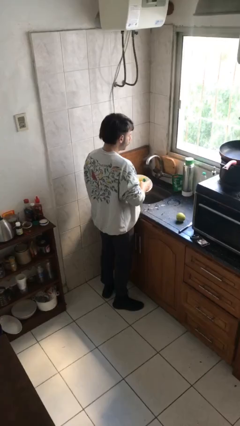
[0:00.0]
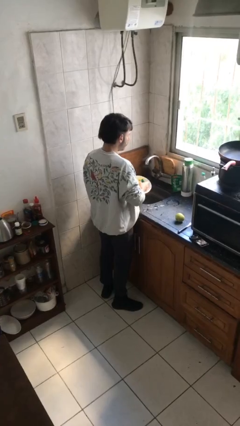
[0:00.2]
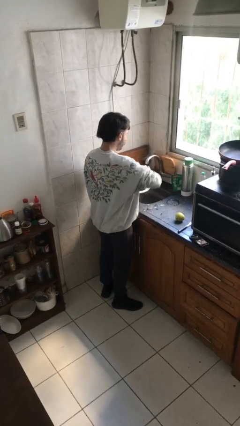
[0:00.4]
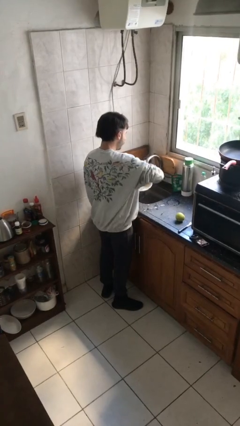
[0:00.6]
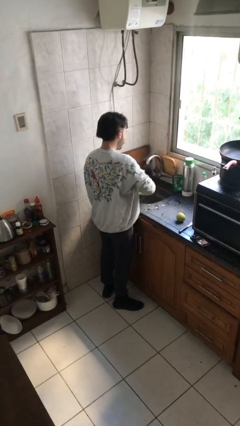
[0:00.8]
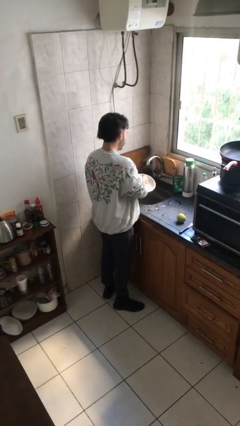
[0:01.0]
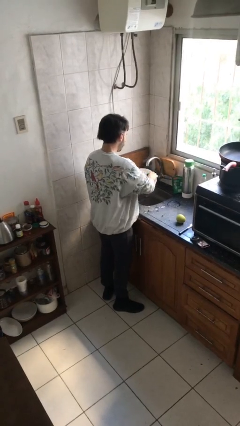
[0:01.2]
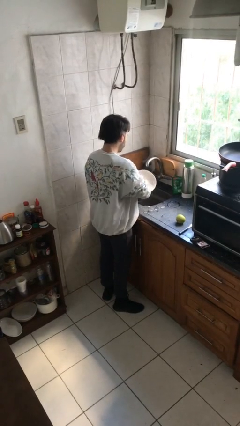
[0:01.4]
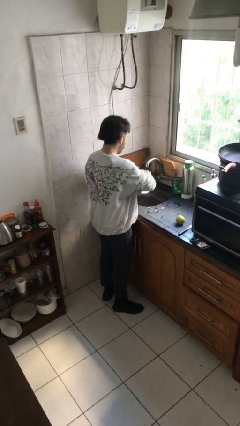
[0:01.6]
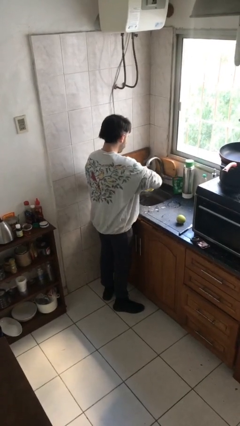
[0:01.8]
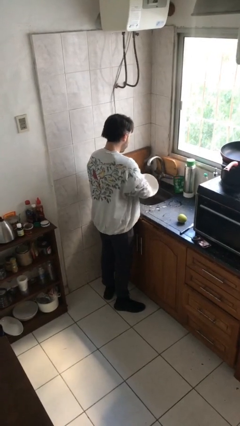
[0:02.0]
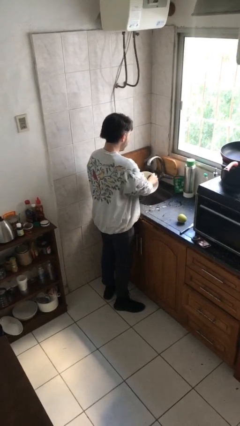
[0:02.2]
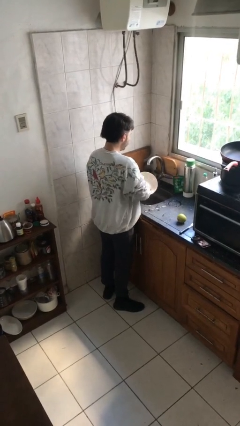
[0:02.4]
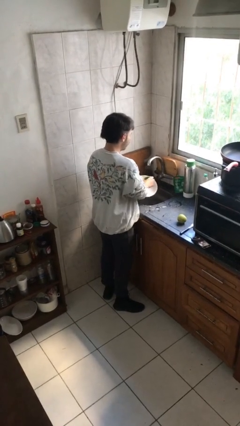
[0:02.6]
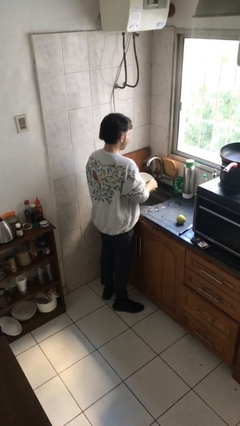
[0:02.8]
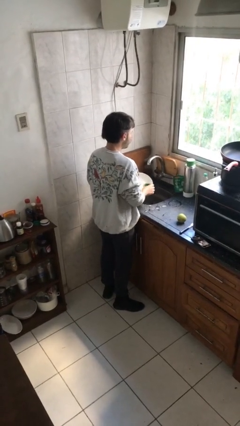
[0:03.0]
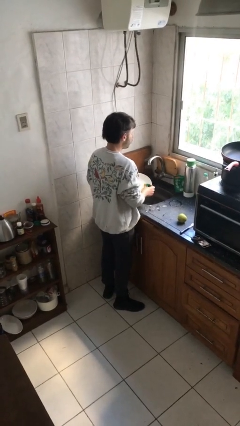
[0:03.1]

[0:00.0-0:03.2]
person washes dish

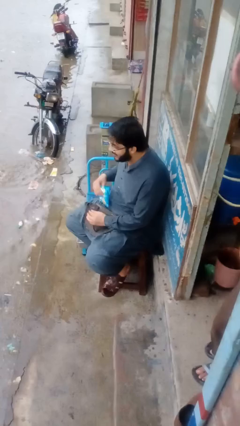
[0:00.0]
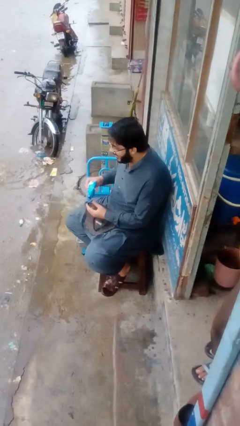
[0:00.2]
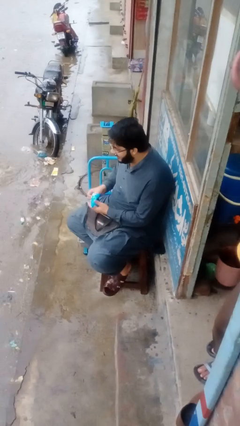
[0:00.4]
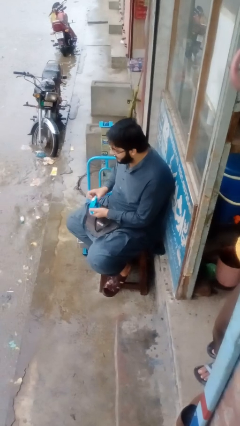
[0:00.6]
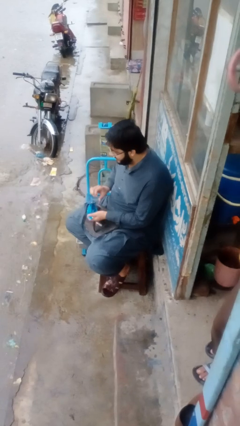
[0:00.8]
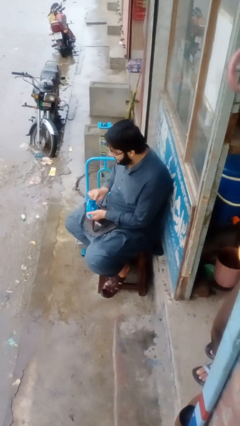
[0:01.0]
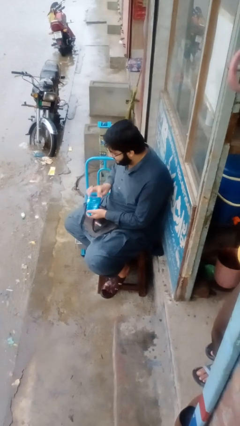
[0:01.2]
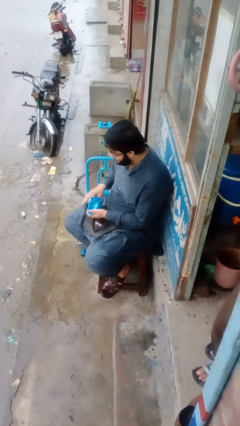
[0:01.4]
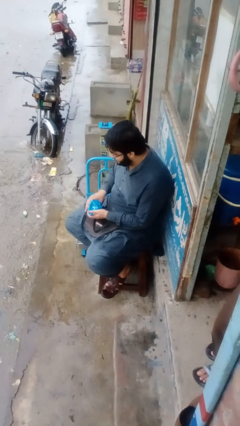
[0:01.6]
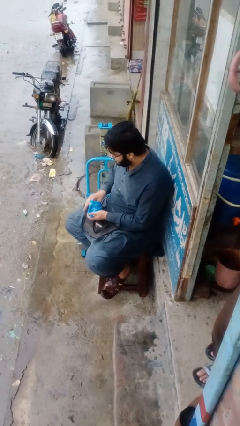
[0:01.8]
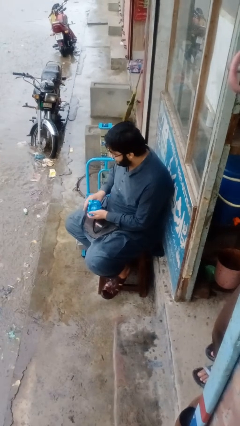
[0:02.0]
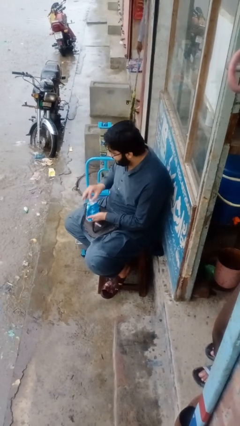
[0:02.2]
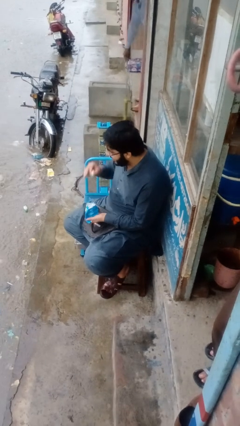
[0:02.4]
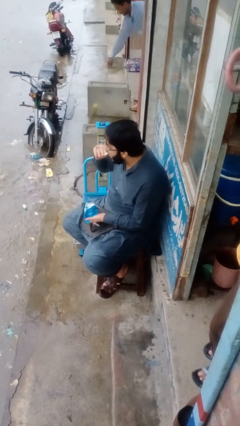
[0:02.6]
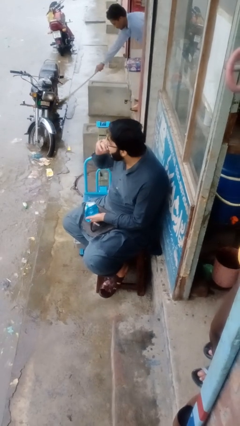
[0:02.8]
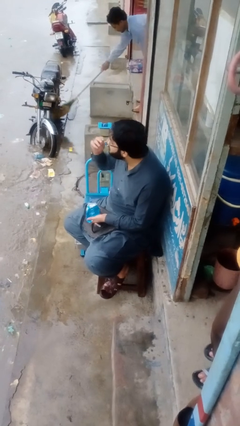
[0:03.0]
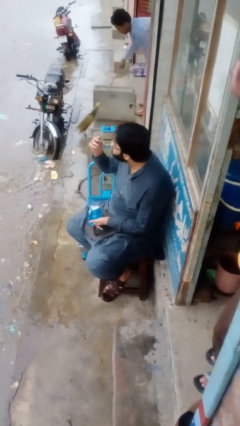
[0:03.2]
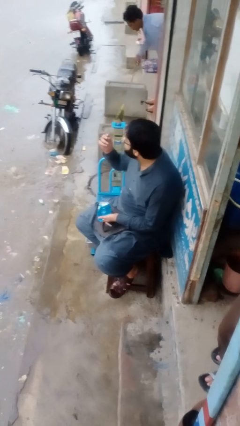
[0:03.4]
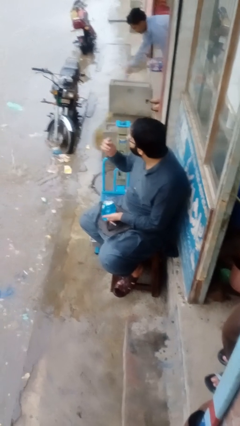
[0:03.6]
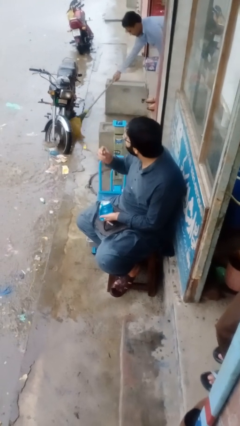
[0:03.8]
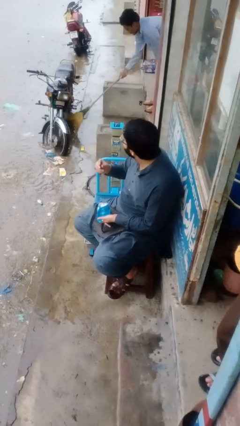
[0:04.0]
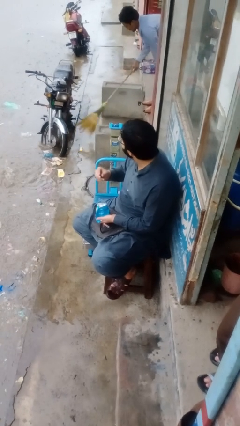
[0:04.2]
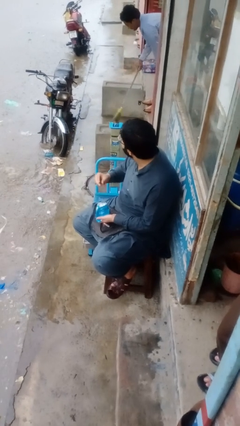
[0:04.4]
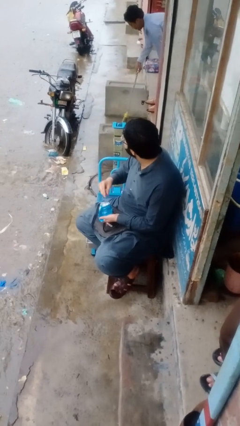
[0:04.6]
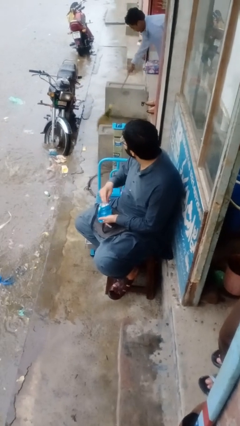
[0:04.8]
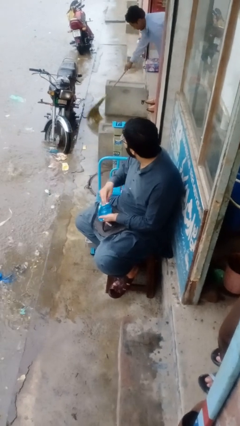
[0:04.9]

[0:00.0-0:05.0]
person eats snack from bag

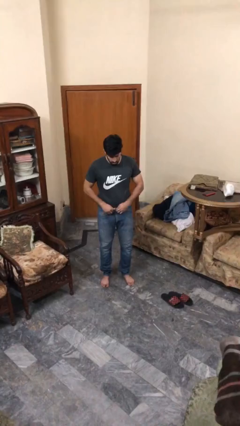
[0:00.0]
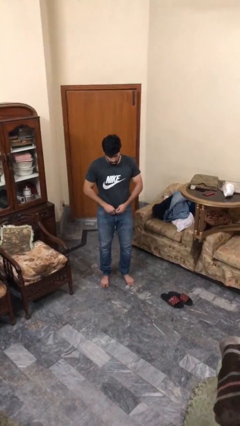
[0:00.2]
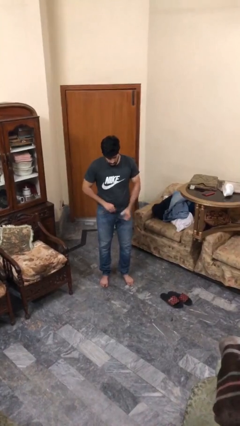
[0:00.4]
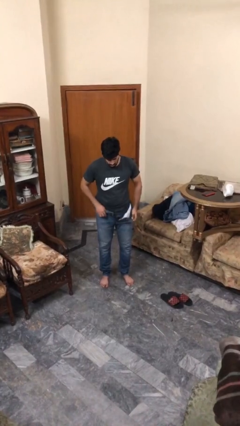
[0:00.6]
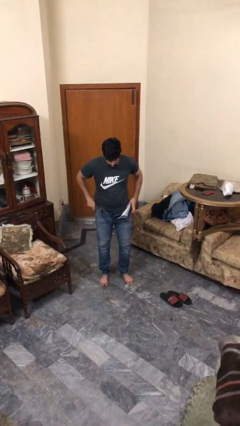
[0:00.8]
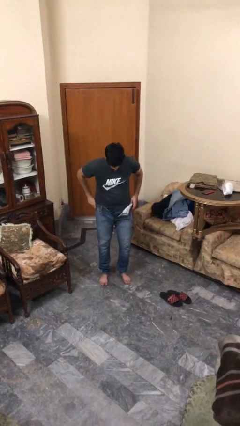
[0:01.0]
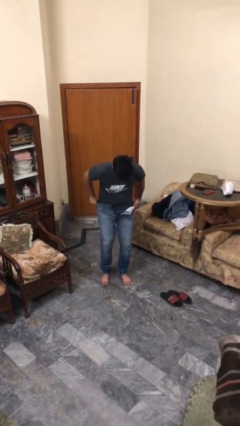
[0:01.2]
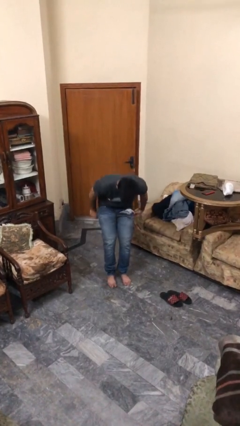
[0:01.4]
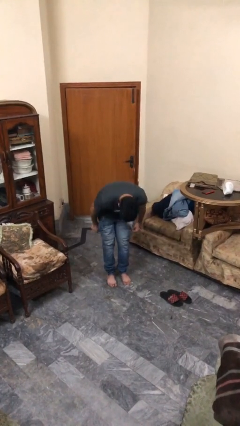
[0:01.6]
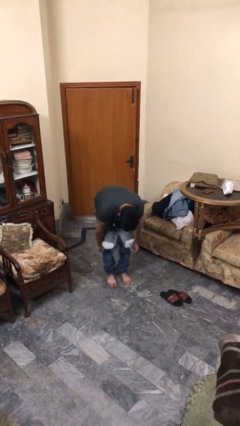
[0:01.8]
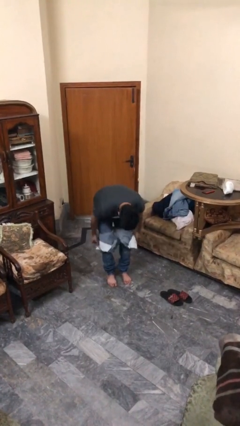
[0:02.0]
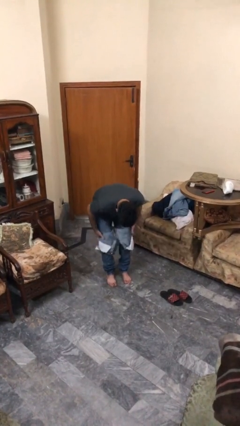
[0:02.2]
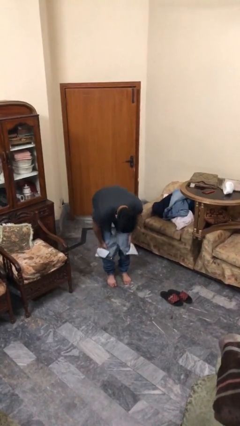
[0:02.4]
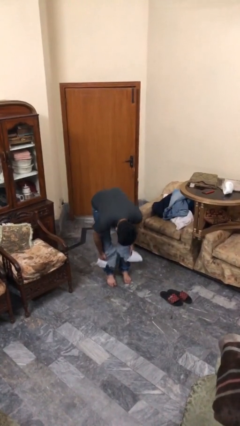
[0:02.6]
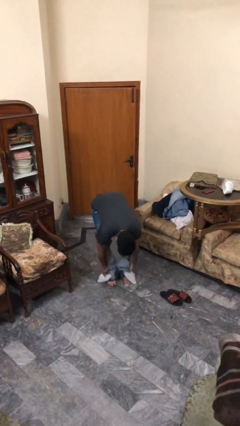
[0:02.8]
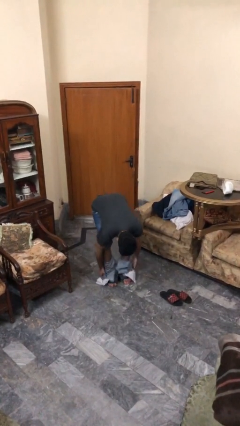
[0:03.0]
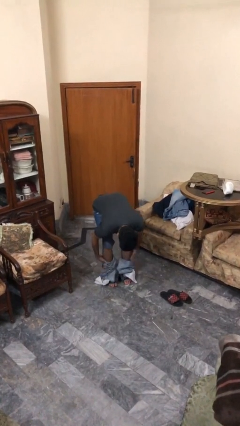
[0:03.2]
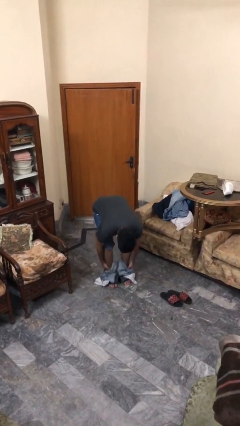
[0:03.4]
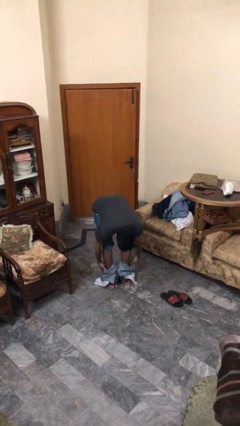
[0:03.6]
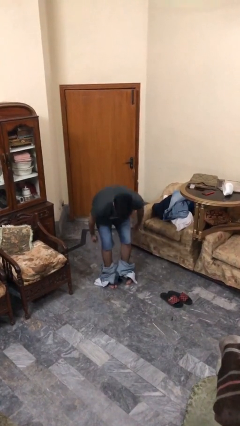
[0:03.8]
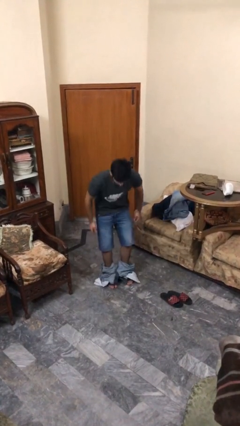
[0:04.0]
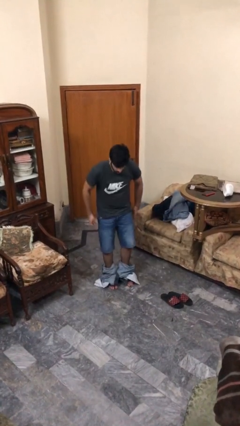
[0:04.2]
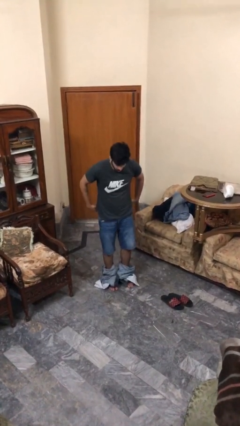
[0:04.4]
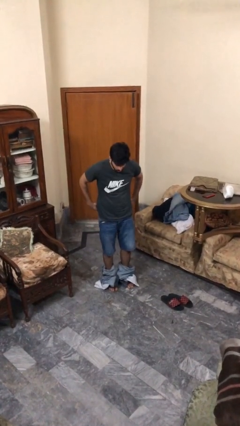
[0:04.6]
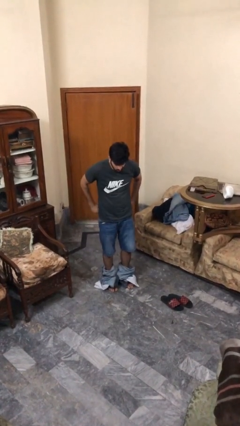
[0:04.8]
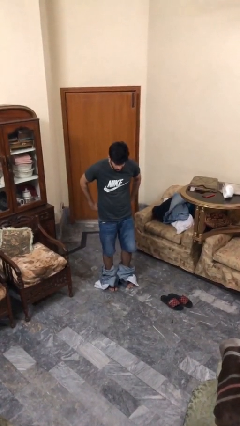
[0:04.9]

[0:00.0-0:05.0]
person takes off pants

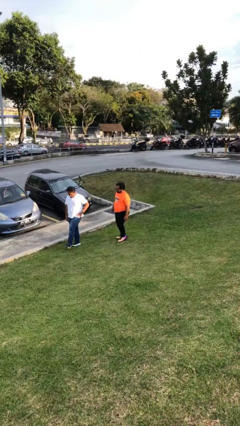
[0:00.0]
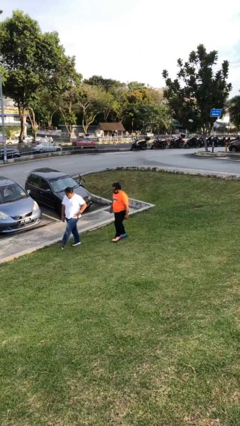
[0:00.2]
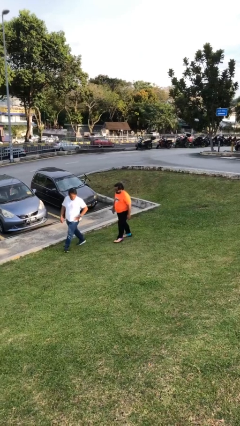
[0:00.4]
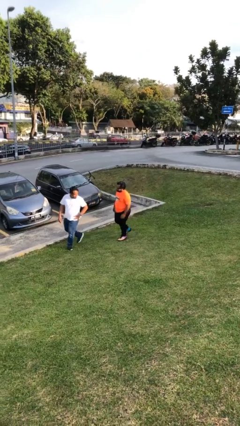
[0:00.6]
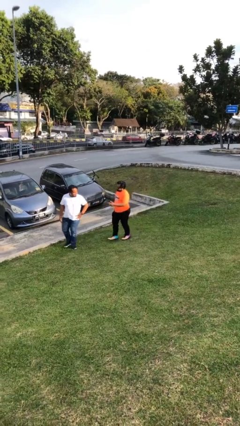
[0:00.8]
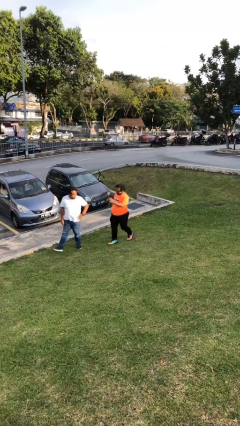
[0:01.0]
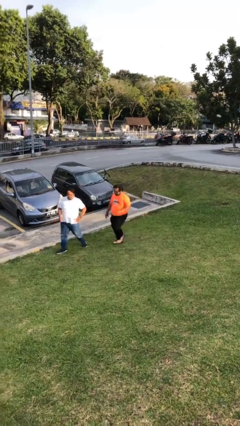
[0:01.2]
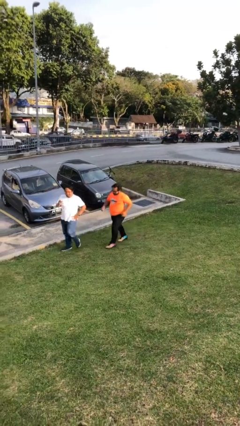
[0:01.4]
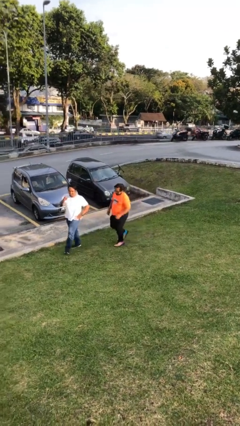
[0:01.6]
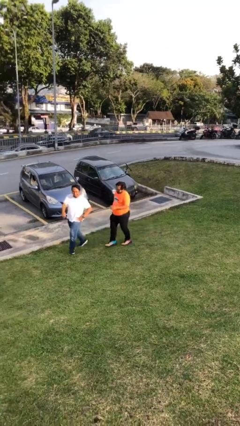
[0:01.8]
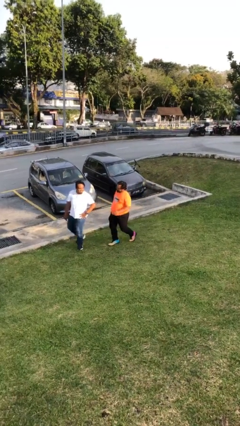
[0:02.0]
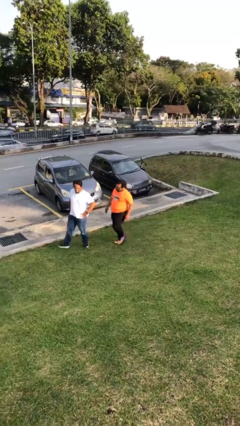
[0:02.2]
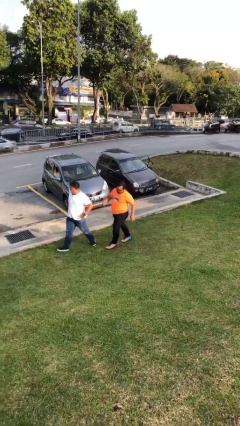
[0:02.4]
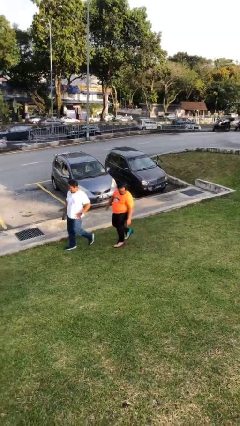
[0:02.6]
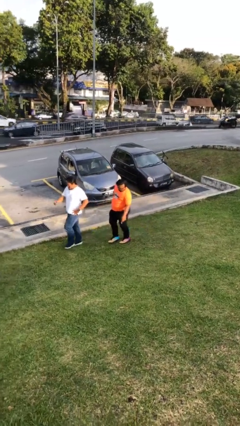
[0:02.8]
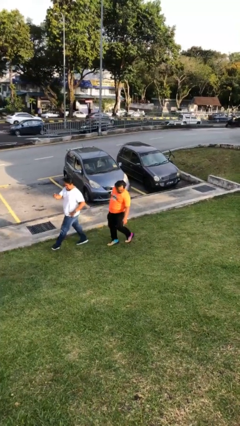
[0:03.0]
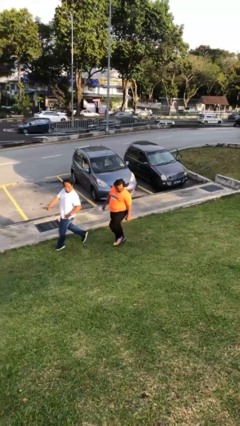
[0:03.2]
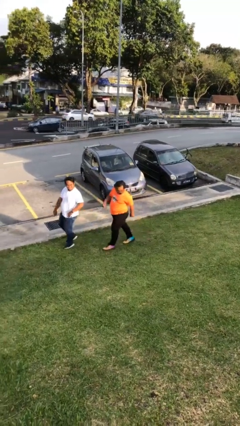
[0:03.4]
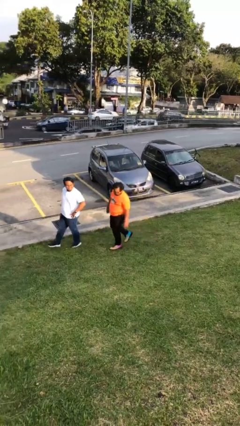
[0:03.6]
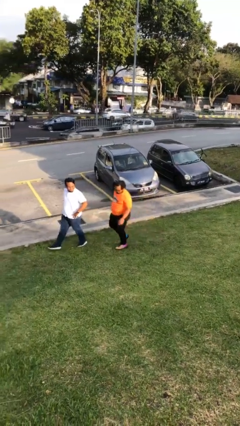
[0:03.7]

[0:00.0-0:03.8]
person talks to person

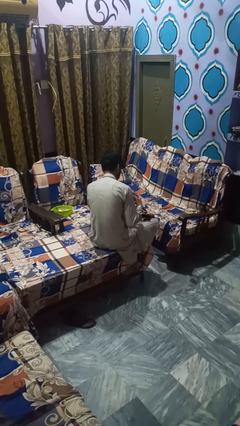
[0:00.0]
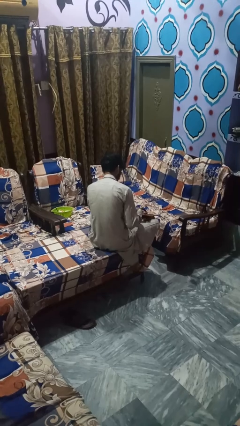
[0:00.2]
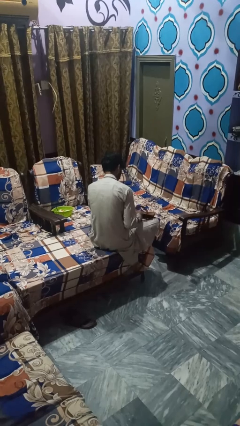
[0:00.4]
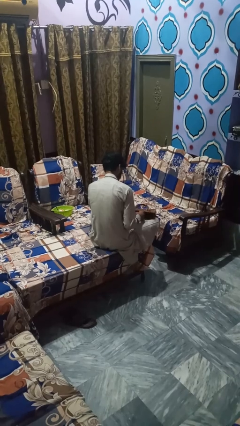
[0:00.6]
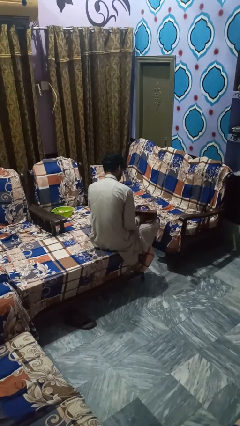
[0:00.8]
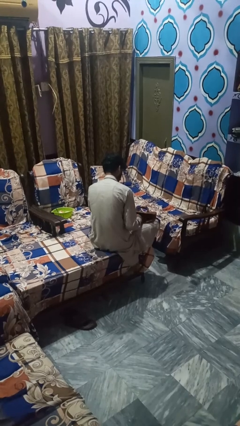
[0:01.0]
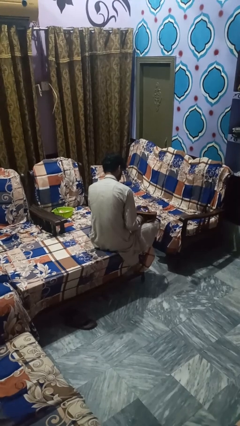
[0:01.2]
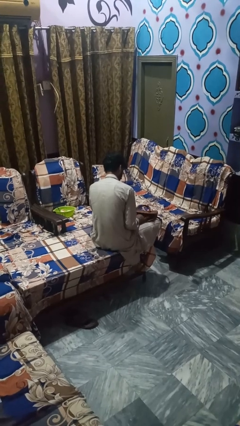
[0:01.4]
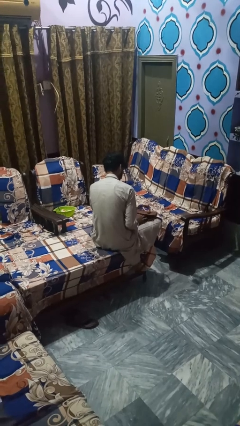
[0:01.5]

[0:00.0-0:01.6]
person puts object into bag
